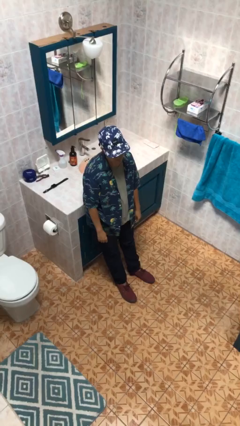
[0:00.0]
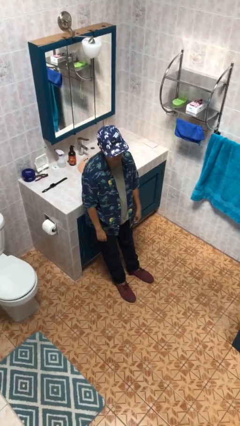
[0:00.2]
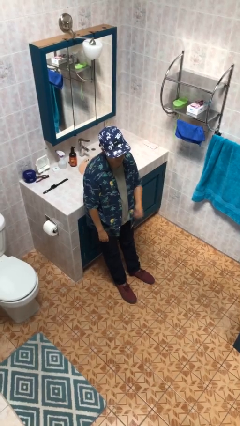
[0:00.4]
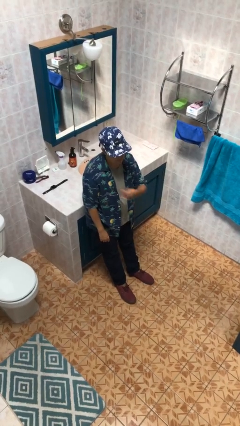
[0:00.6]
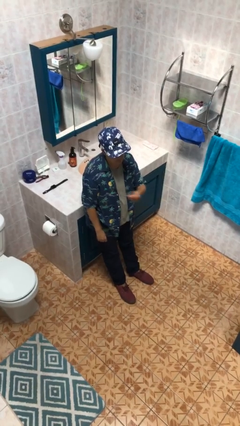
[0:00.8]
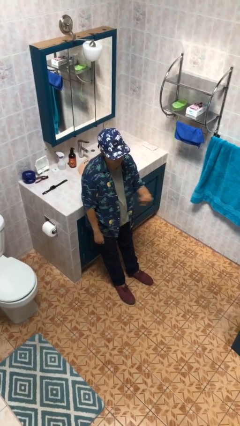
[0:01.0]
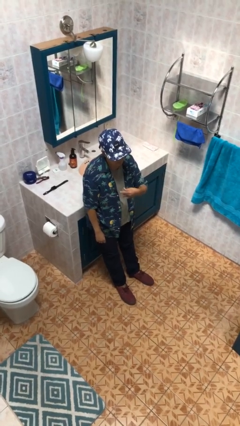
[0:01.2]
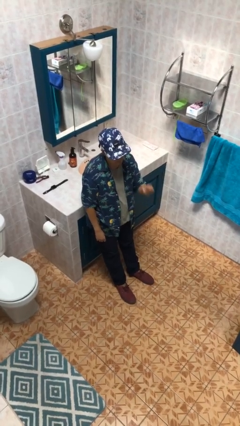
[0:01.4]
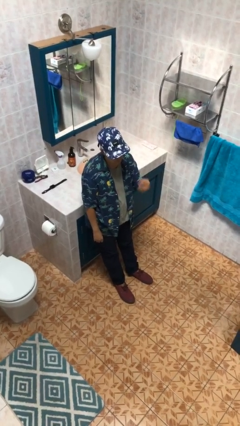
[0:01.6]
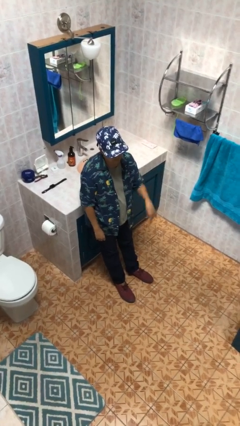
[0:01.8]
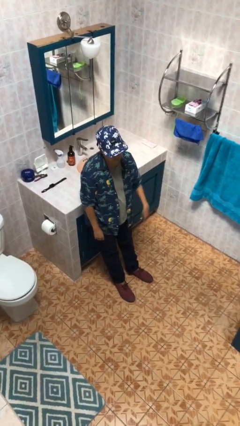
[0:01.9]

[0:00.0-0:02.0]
person snaps fingers

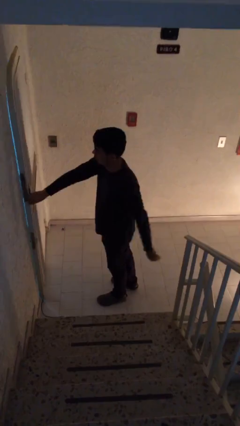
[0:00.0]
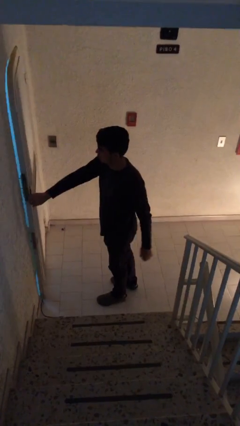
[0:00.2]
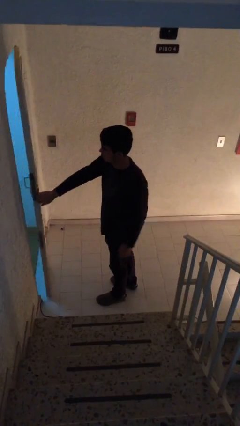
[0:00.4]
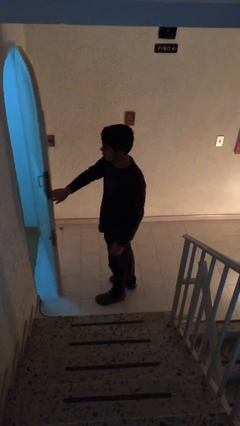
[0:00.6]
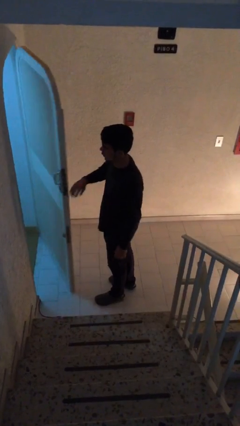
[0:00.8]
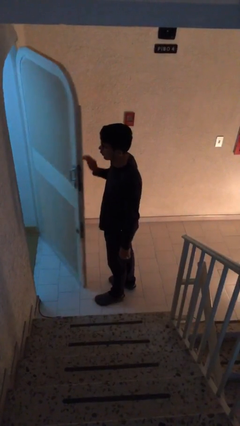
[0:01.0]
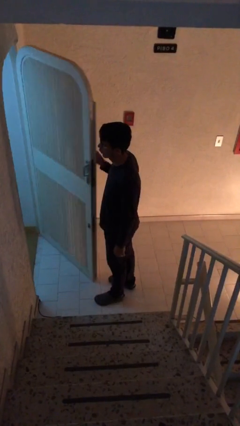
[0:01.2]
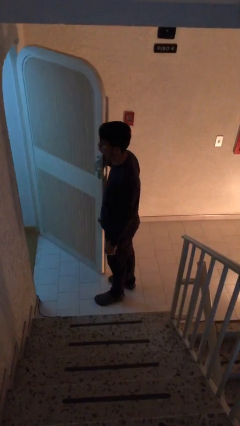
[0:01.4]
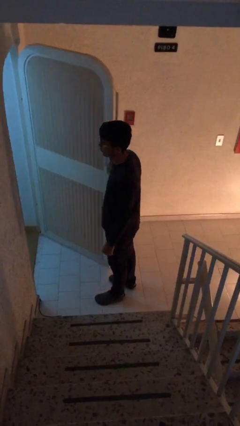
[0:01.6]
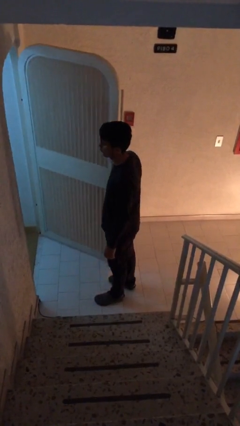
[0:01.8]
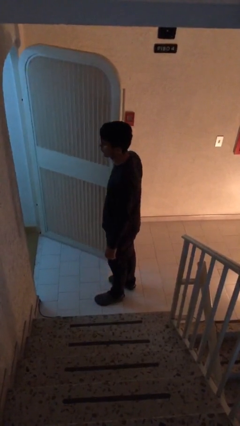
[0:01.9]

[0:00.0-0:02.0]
person opens facility door

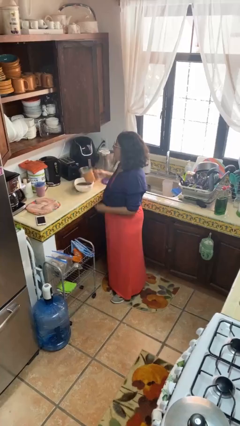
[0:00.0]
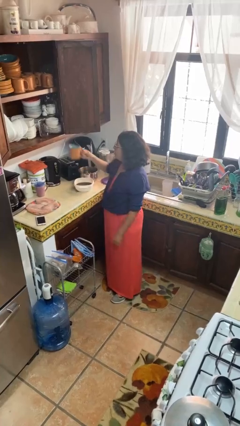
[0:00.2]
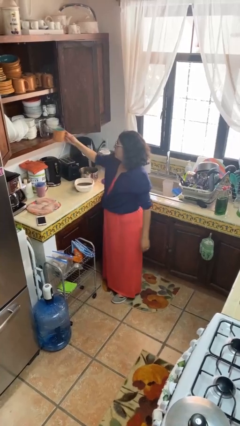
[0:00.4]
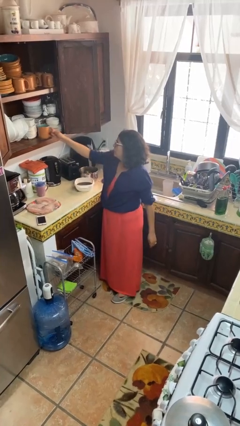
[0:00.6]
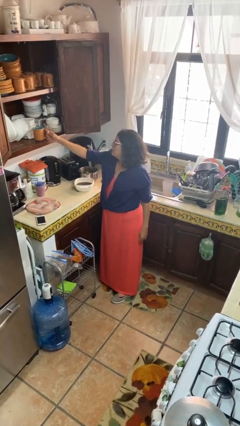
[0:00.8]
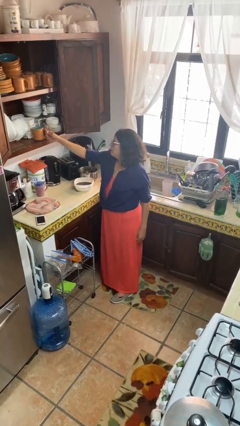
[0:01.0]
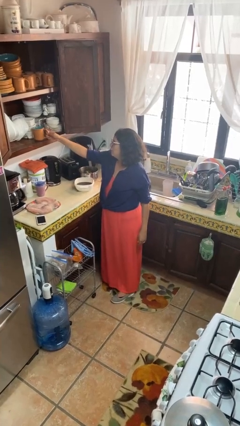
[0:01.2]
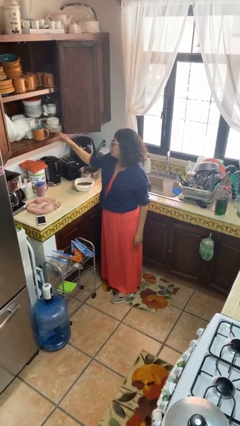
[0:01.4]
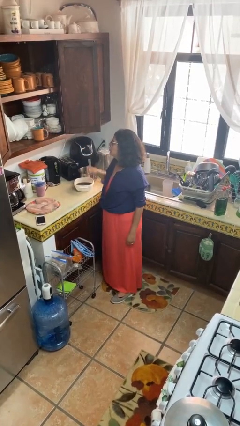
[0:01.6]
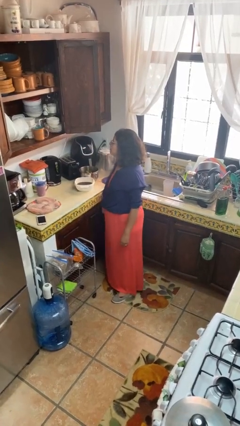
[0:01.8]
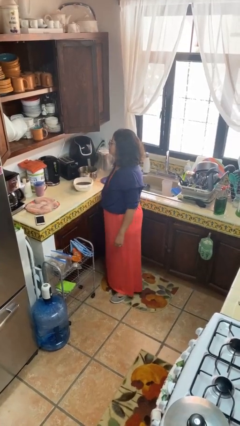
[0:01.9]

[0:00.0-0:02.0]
person puts down object into cabinet

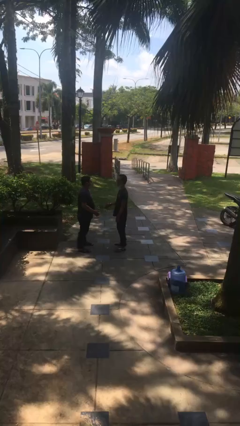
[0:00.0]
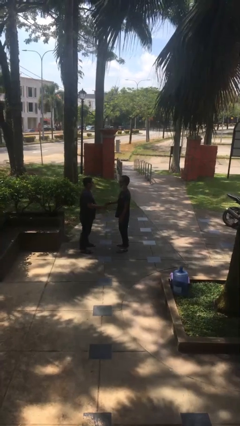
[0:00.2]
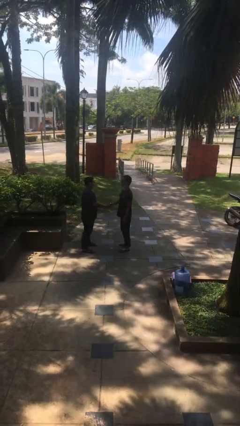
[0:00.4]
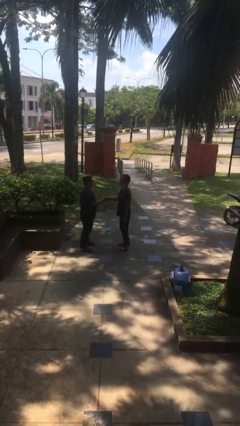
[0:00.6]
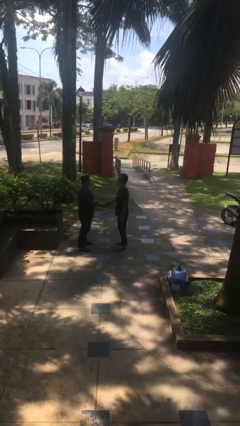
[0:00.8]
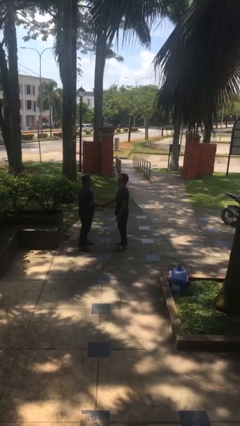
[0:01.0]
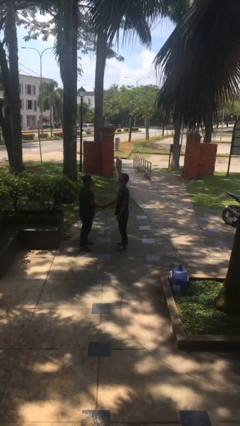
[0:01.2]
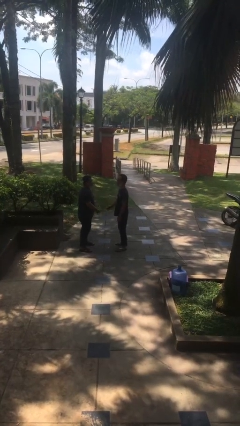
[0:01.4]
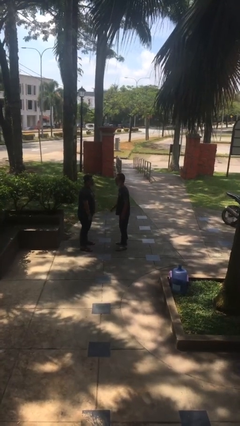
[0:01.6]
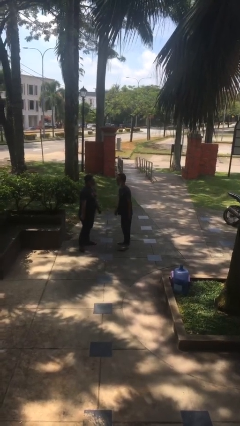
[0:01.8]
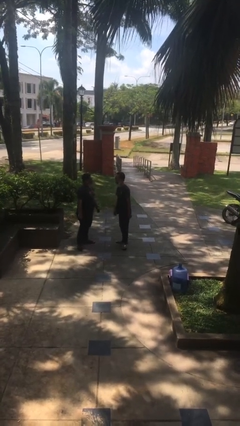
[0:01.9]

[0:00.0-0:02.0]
person shakes hand

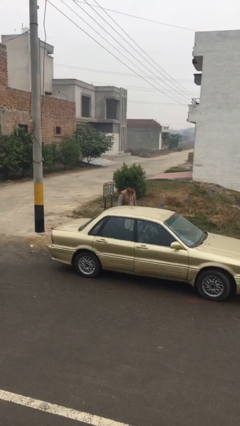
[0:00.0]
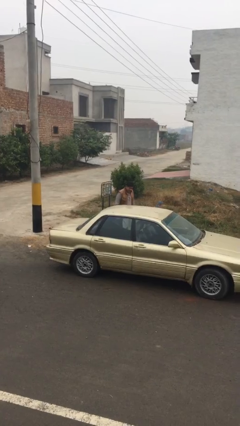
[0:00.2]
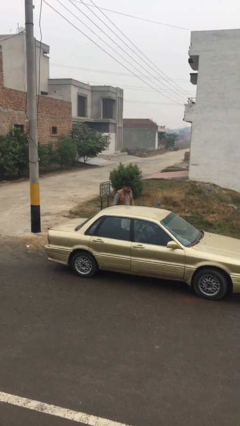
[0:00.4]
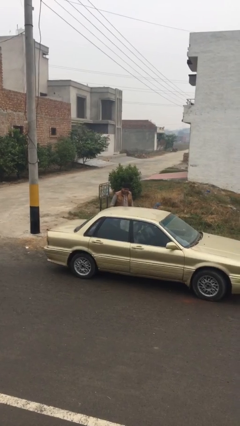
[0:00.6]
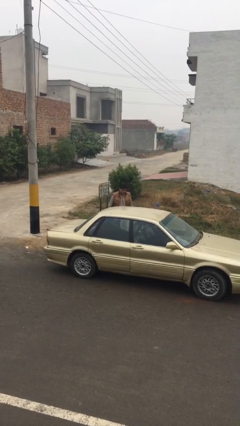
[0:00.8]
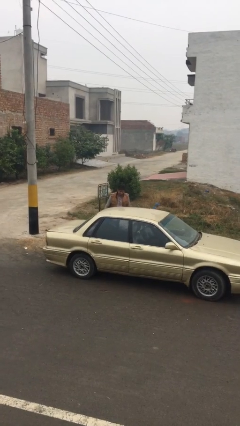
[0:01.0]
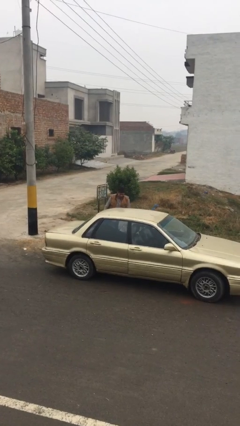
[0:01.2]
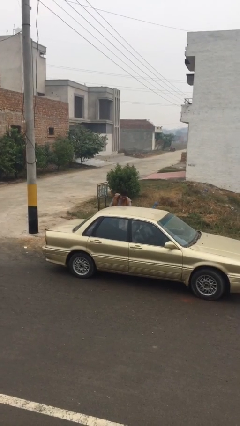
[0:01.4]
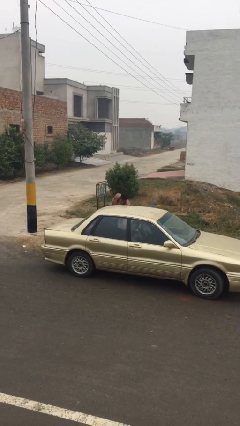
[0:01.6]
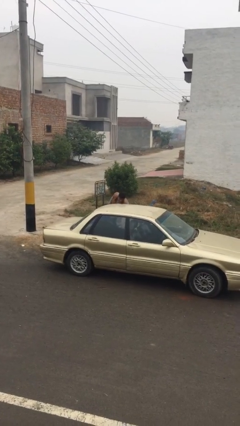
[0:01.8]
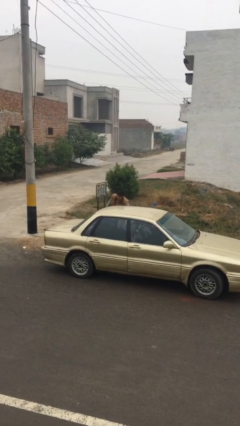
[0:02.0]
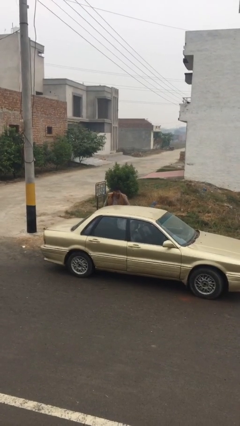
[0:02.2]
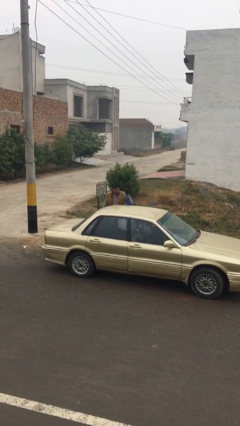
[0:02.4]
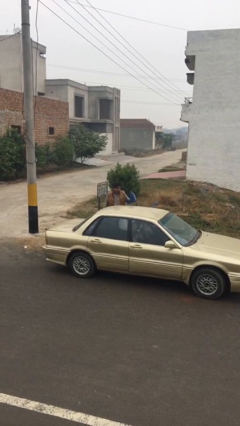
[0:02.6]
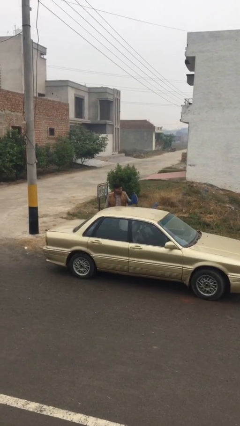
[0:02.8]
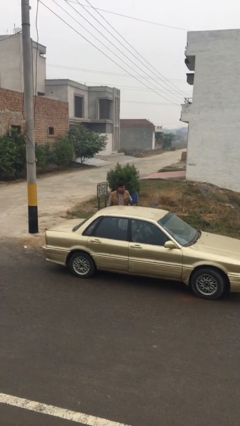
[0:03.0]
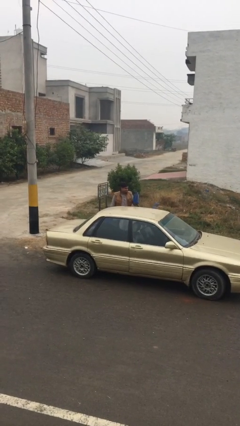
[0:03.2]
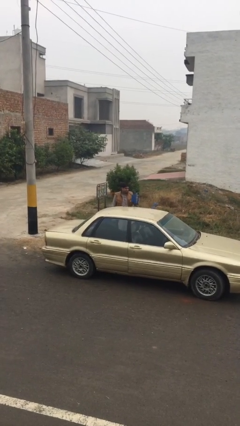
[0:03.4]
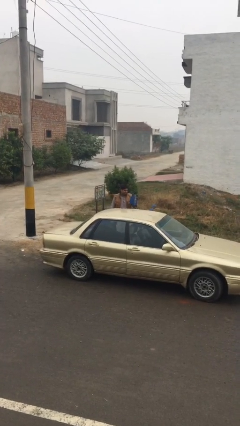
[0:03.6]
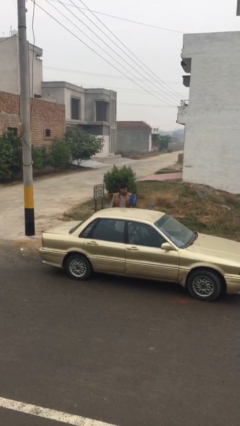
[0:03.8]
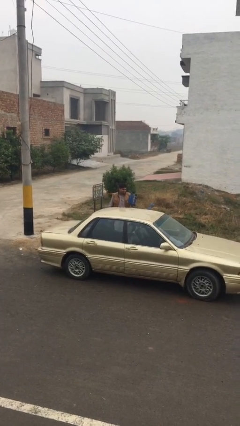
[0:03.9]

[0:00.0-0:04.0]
person unloads car

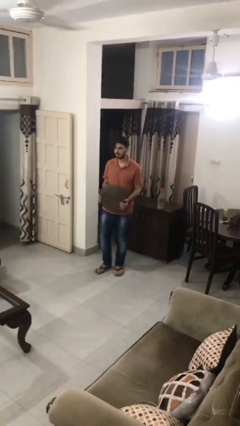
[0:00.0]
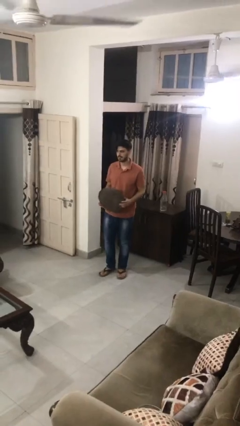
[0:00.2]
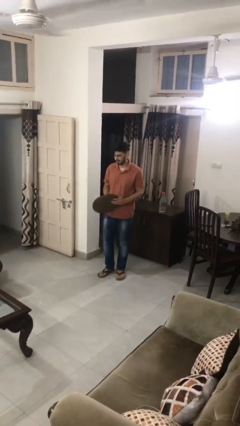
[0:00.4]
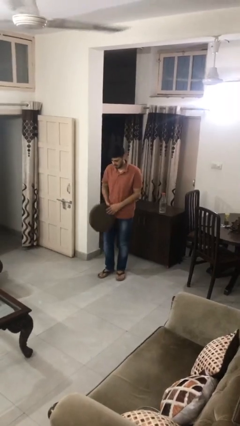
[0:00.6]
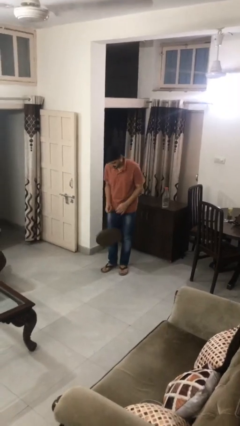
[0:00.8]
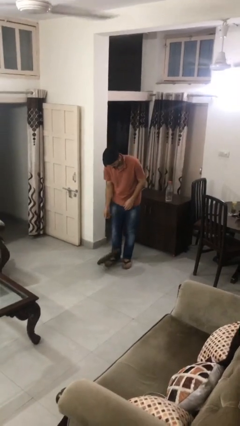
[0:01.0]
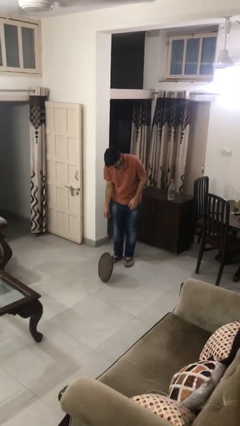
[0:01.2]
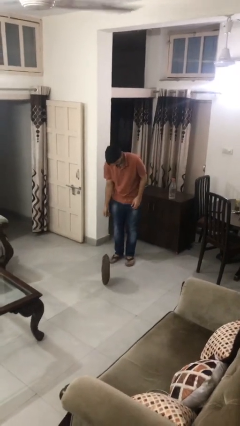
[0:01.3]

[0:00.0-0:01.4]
person drops object

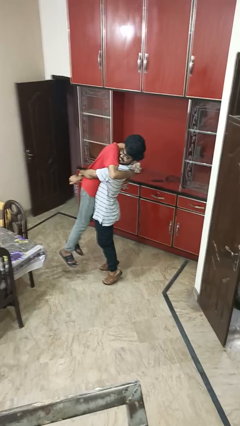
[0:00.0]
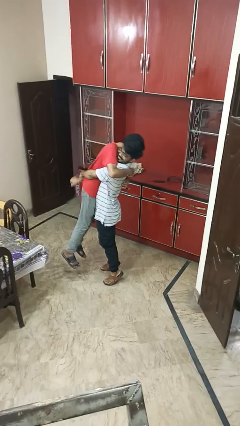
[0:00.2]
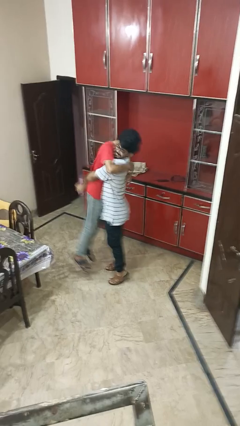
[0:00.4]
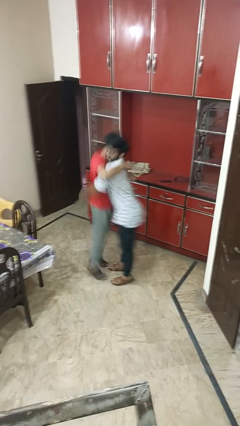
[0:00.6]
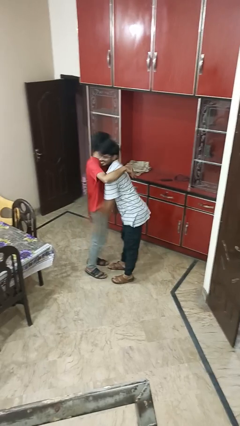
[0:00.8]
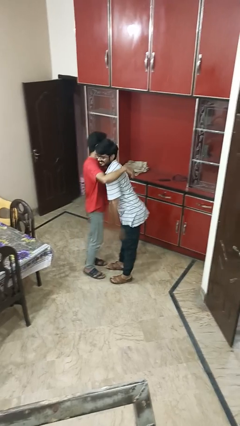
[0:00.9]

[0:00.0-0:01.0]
person puts down person

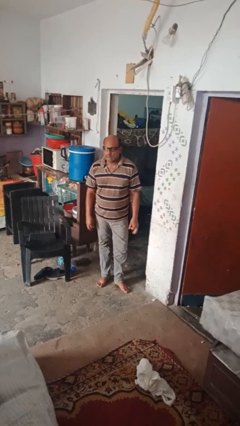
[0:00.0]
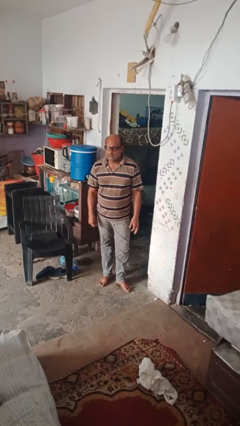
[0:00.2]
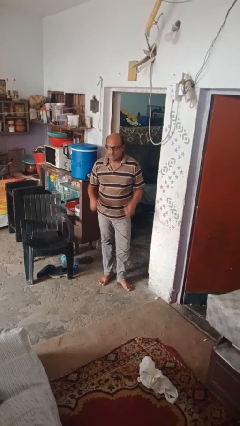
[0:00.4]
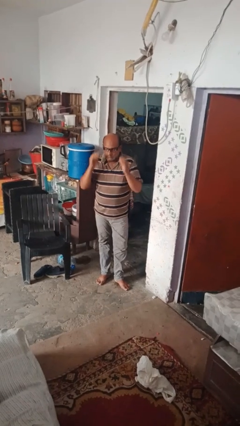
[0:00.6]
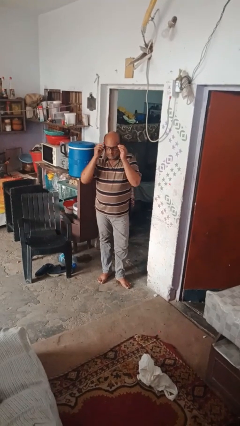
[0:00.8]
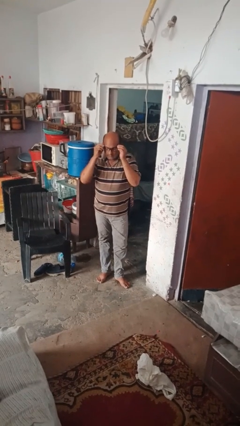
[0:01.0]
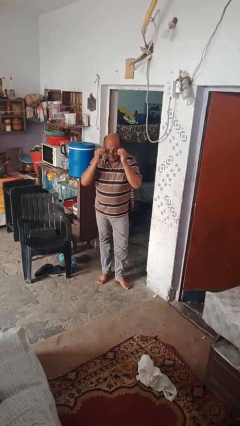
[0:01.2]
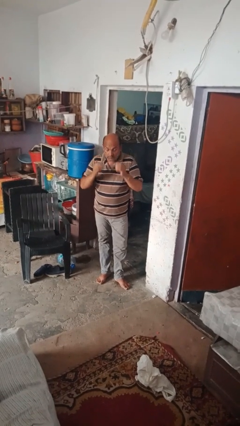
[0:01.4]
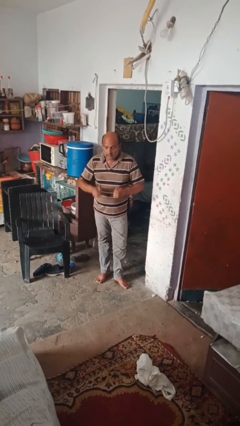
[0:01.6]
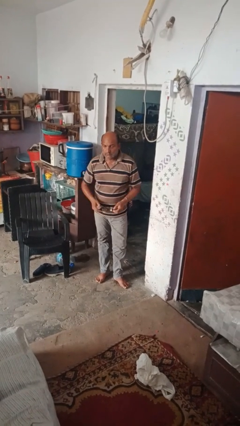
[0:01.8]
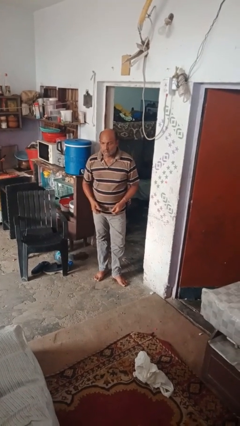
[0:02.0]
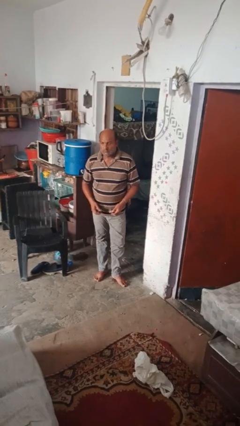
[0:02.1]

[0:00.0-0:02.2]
person takes off glasses

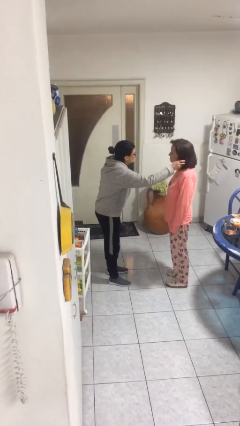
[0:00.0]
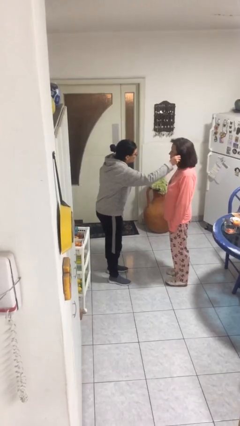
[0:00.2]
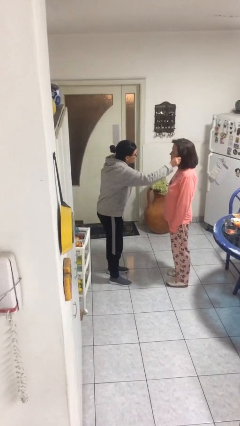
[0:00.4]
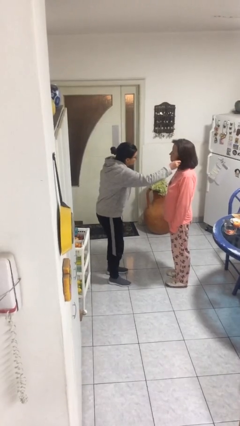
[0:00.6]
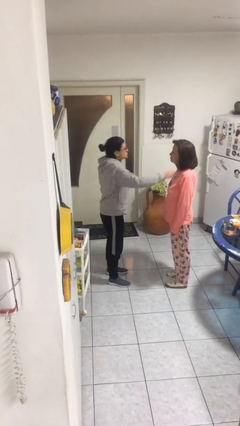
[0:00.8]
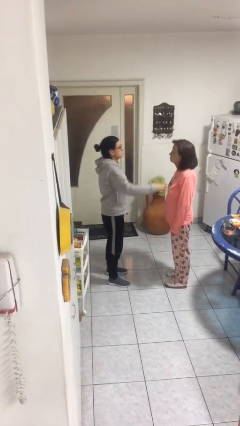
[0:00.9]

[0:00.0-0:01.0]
person grabs person by hair
